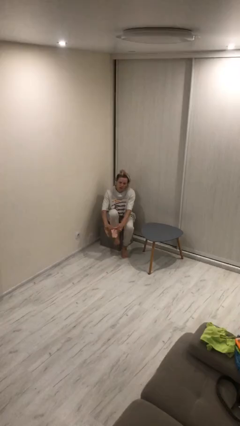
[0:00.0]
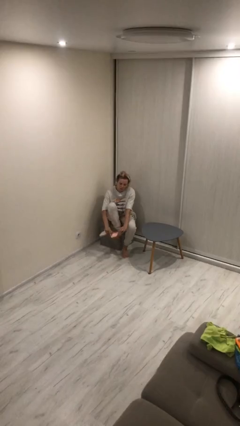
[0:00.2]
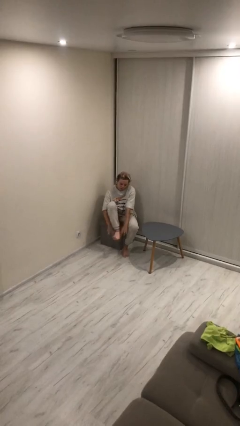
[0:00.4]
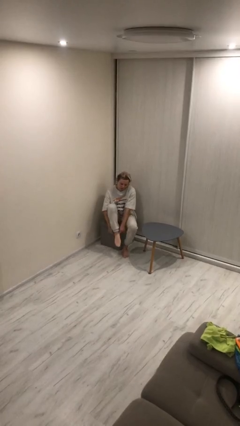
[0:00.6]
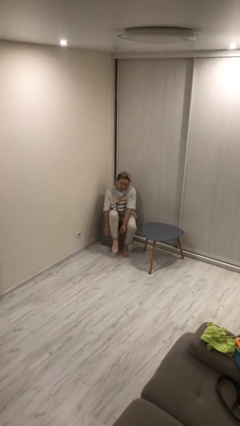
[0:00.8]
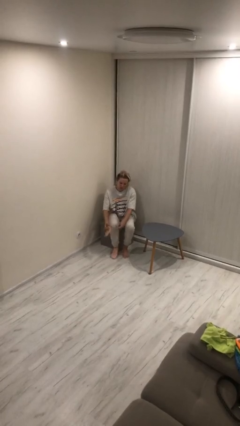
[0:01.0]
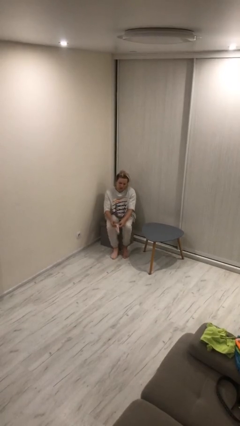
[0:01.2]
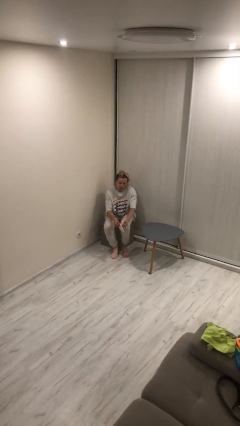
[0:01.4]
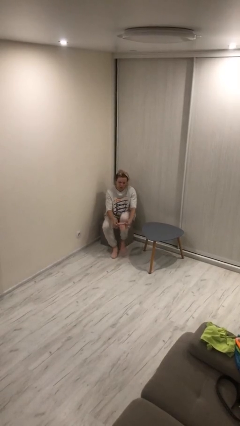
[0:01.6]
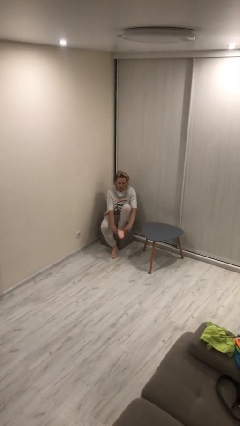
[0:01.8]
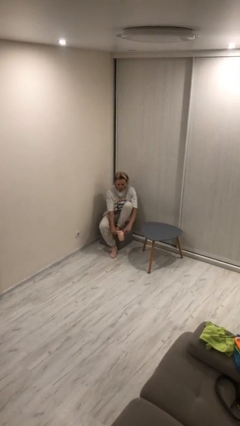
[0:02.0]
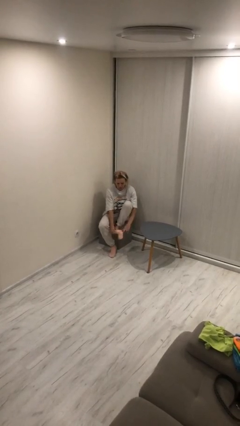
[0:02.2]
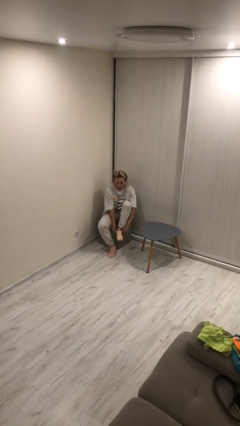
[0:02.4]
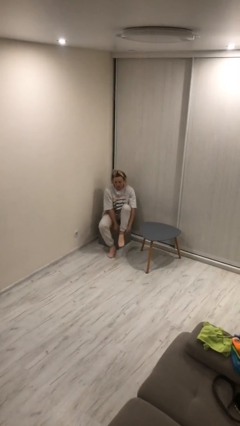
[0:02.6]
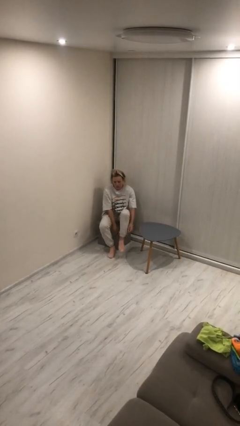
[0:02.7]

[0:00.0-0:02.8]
person puts on socks

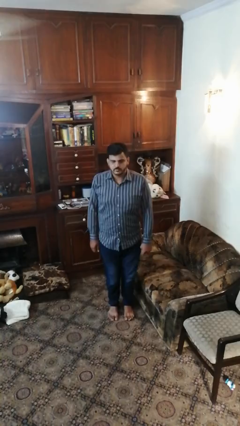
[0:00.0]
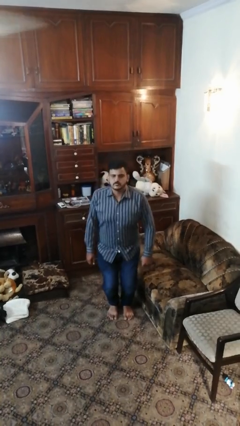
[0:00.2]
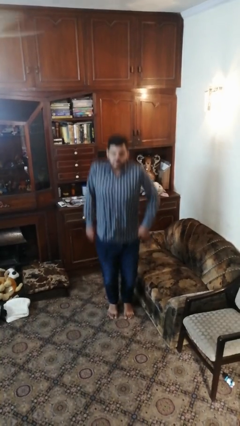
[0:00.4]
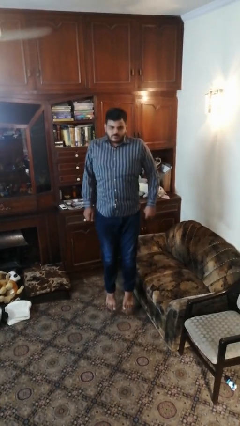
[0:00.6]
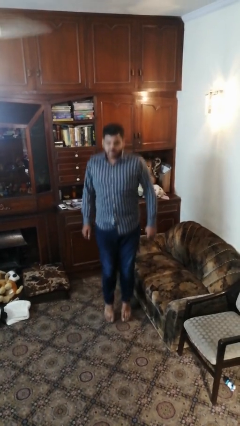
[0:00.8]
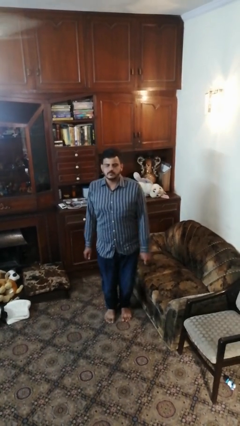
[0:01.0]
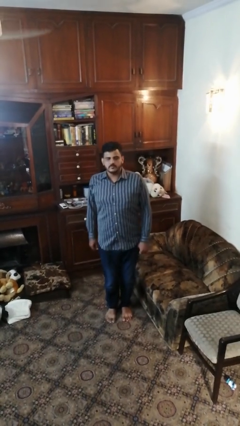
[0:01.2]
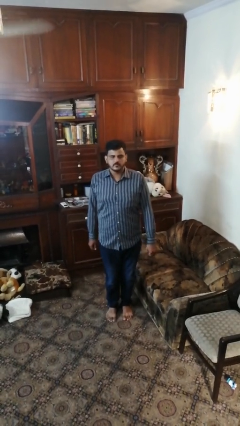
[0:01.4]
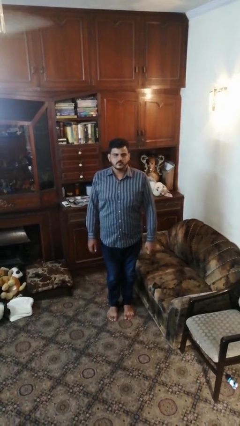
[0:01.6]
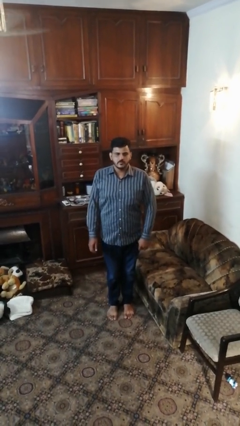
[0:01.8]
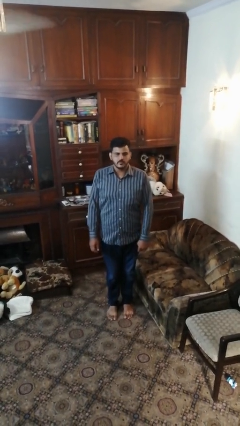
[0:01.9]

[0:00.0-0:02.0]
person jumps

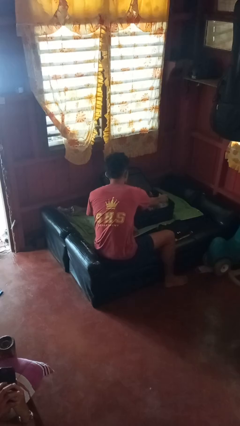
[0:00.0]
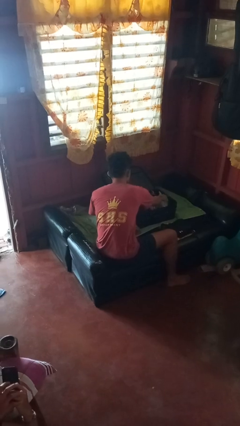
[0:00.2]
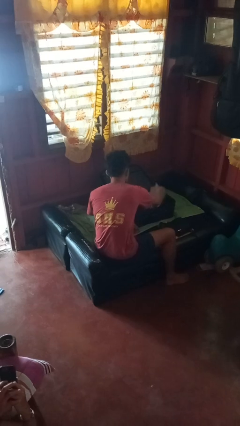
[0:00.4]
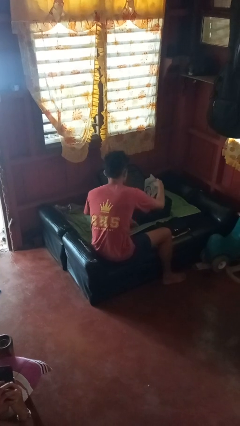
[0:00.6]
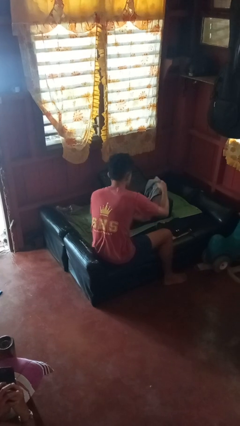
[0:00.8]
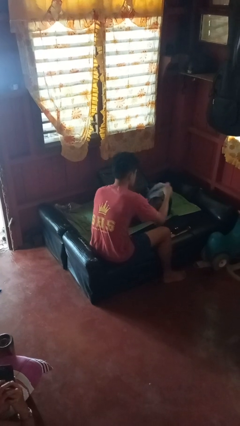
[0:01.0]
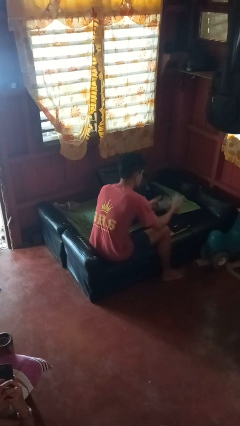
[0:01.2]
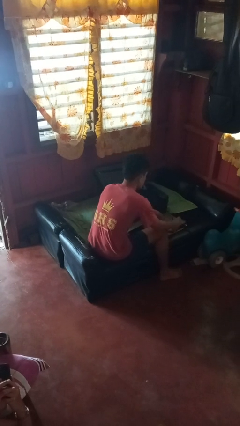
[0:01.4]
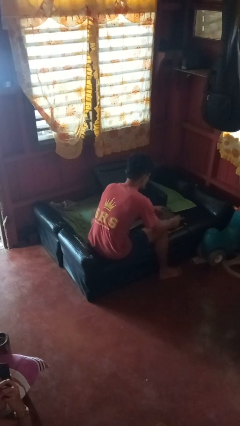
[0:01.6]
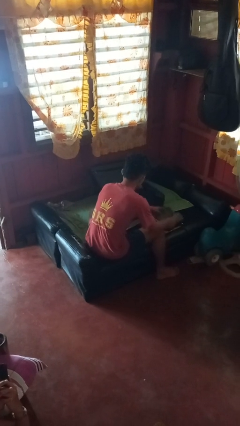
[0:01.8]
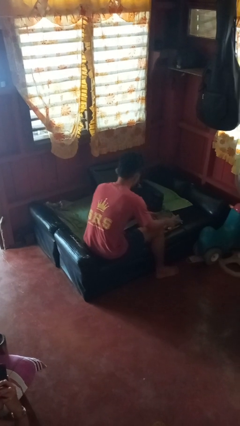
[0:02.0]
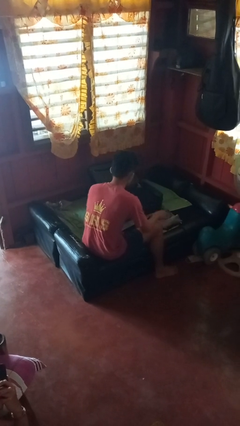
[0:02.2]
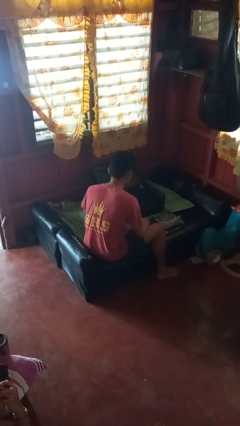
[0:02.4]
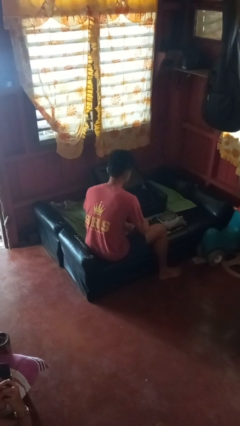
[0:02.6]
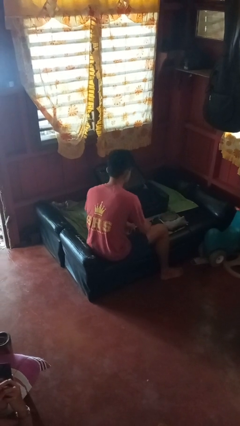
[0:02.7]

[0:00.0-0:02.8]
person unloads clothes from suitcase

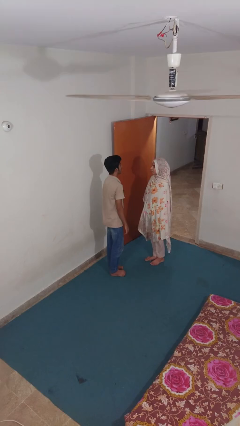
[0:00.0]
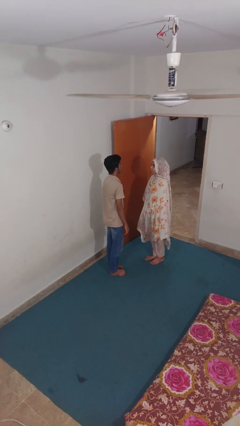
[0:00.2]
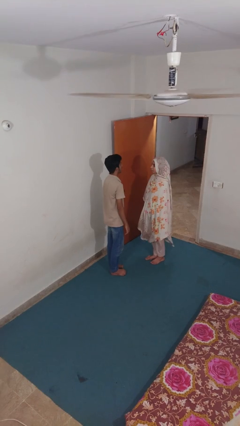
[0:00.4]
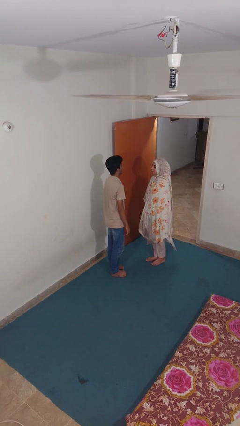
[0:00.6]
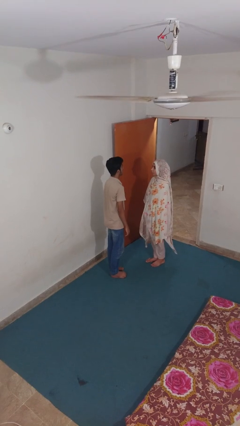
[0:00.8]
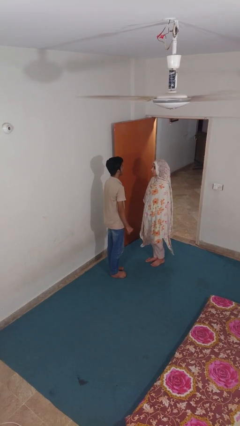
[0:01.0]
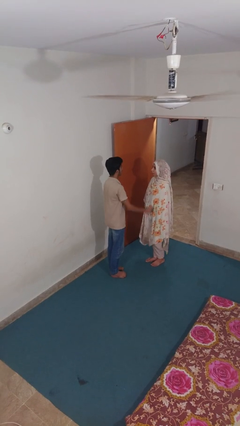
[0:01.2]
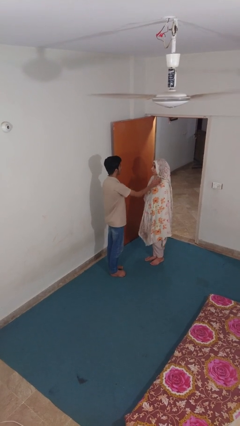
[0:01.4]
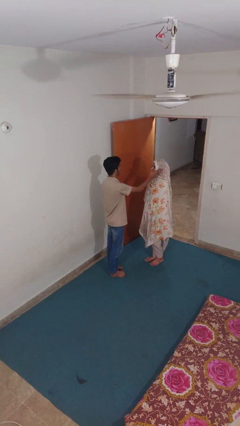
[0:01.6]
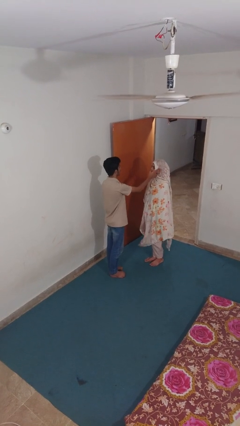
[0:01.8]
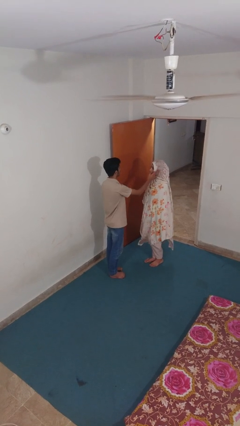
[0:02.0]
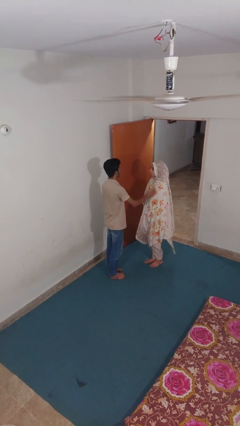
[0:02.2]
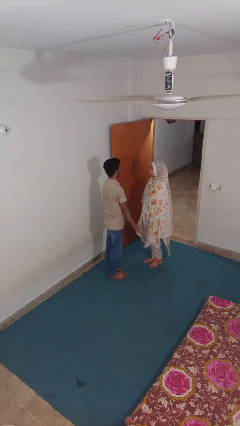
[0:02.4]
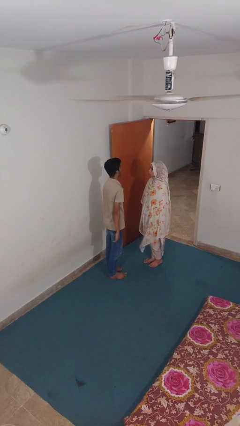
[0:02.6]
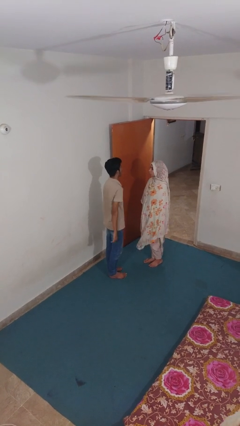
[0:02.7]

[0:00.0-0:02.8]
person touches face of person

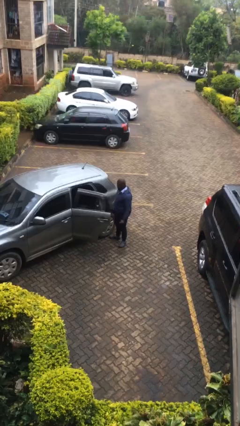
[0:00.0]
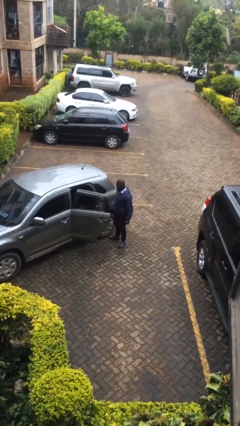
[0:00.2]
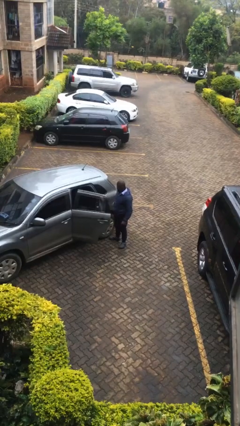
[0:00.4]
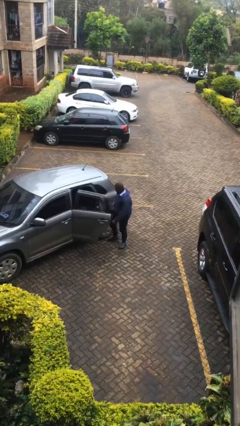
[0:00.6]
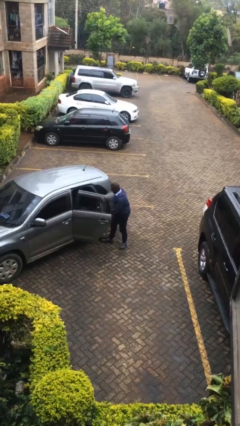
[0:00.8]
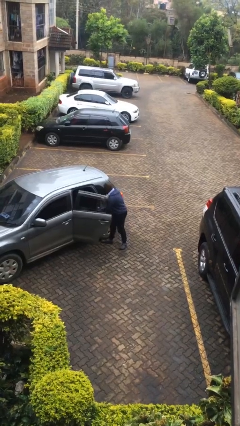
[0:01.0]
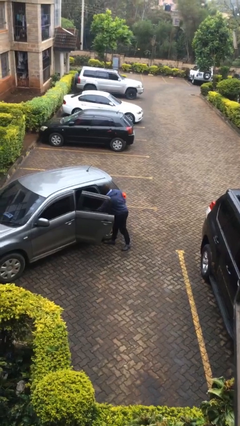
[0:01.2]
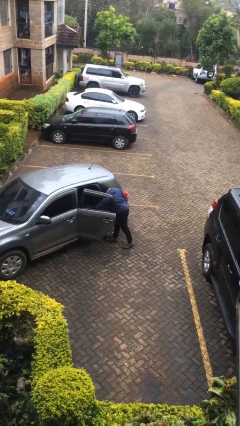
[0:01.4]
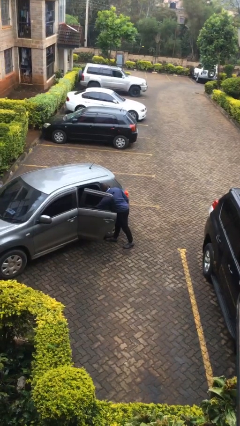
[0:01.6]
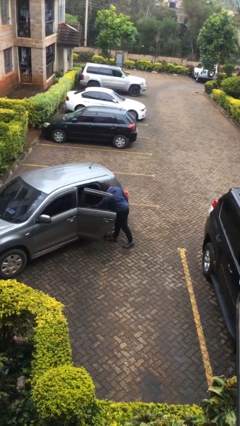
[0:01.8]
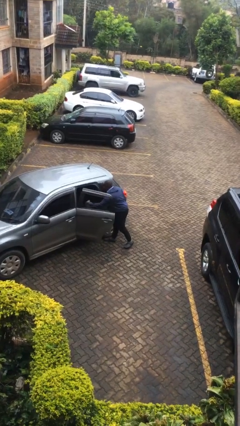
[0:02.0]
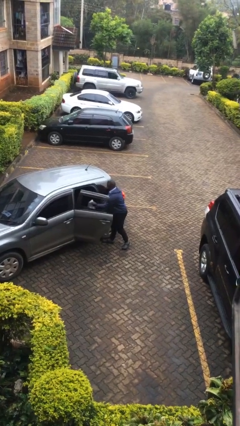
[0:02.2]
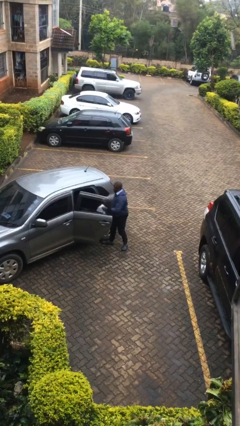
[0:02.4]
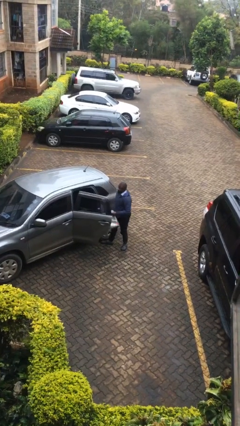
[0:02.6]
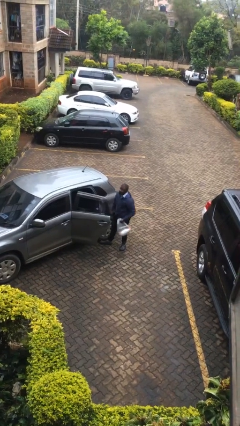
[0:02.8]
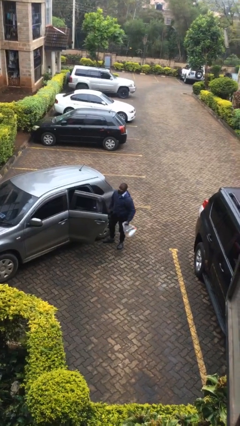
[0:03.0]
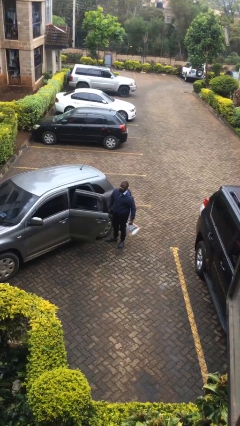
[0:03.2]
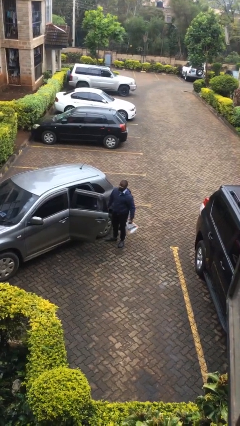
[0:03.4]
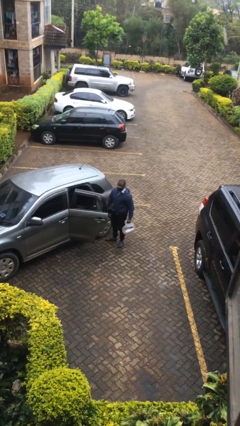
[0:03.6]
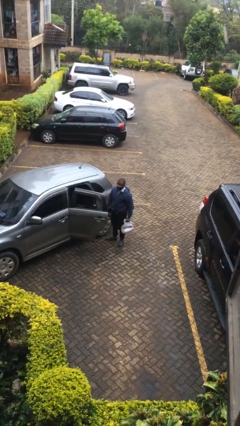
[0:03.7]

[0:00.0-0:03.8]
person unloads car

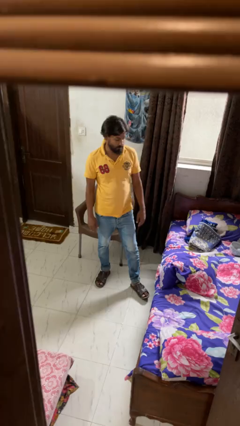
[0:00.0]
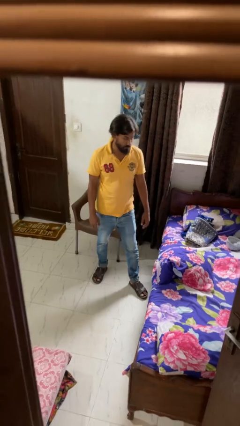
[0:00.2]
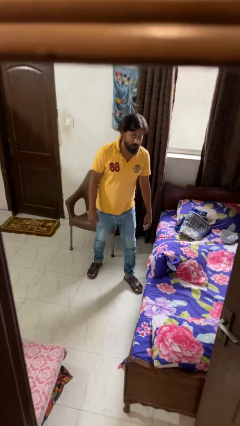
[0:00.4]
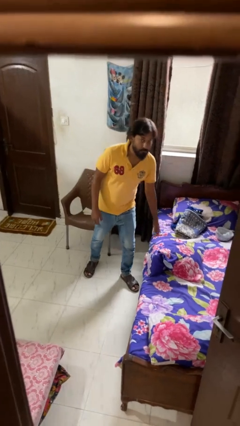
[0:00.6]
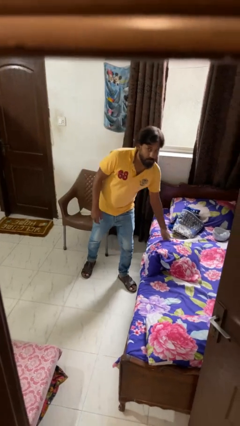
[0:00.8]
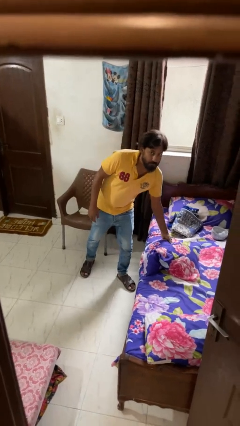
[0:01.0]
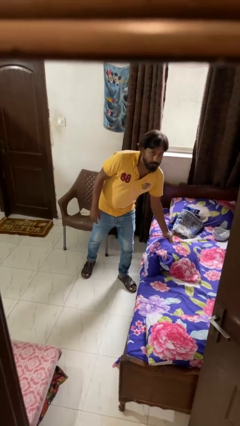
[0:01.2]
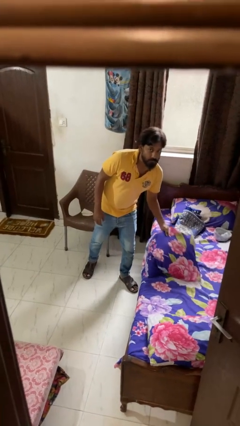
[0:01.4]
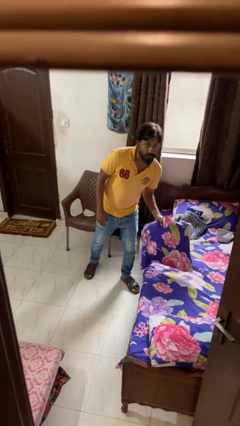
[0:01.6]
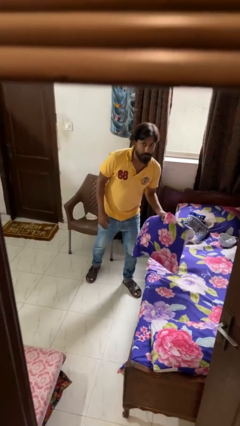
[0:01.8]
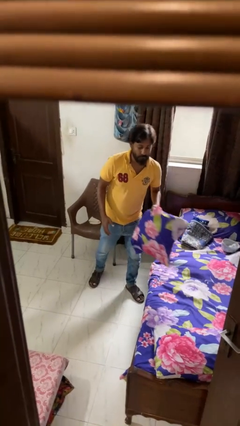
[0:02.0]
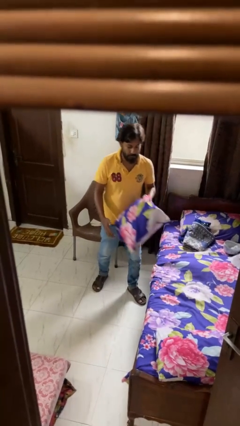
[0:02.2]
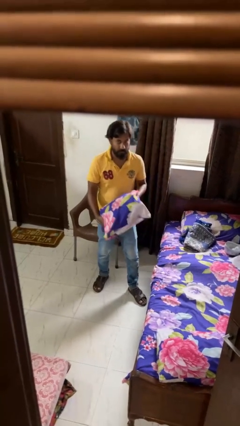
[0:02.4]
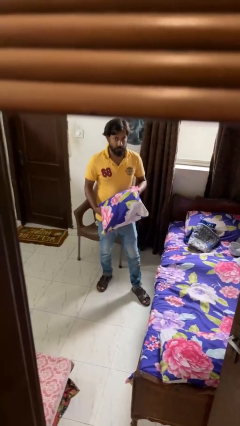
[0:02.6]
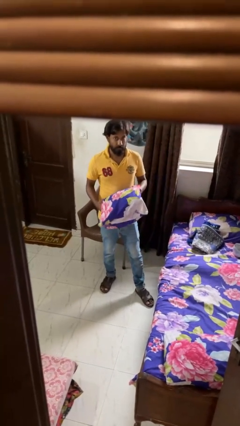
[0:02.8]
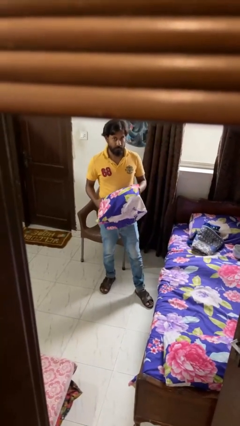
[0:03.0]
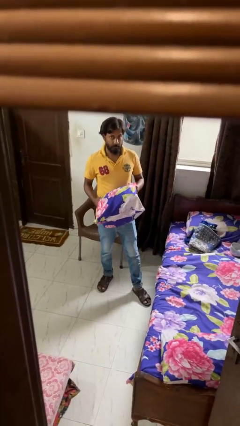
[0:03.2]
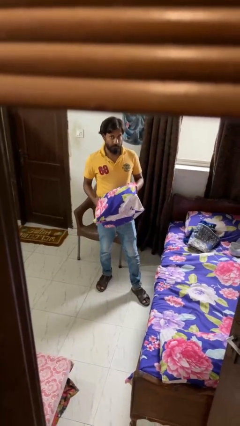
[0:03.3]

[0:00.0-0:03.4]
person picks up object from bed
